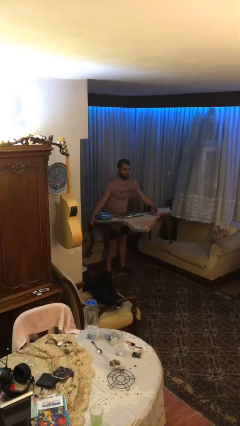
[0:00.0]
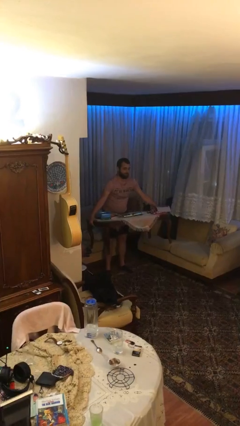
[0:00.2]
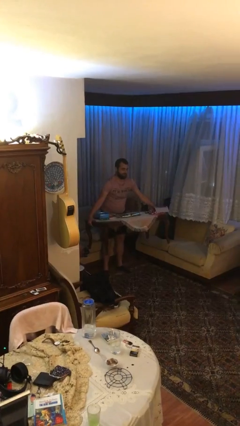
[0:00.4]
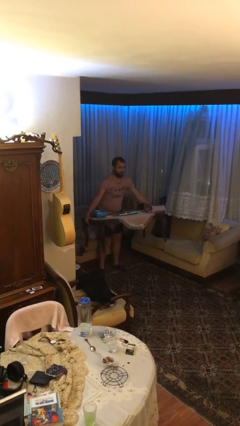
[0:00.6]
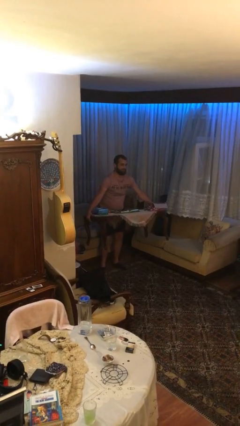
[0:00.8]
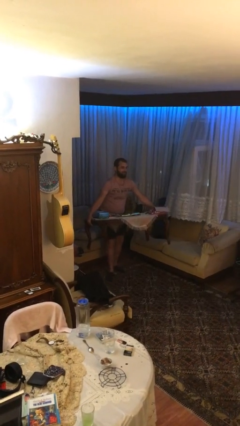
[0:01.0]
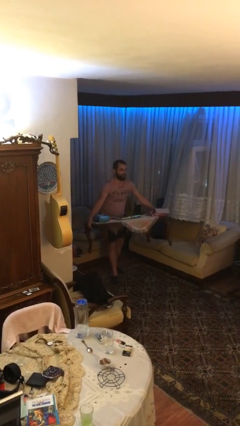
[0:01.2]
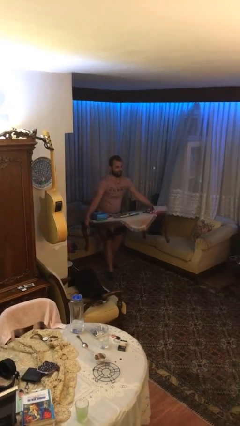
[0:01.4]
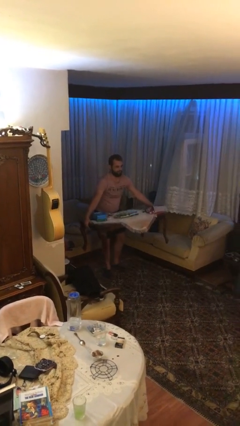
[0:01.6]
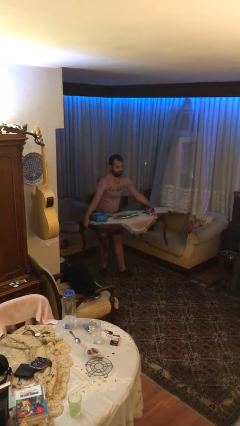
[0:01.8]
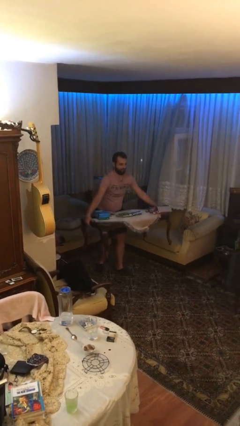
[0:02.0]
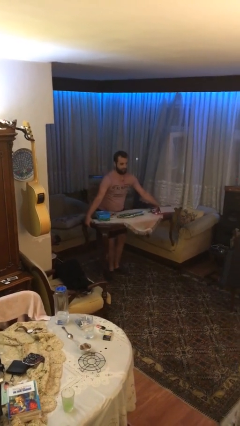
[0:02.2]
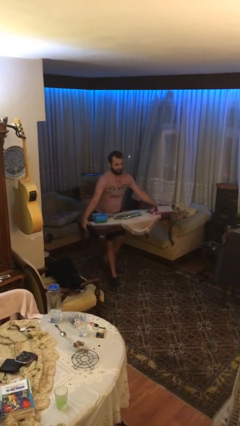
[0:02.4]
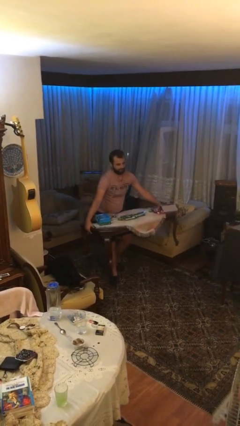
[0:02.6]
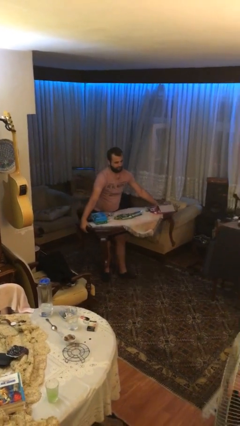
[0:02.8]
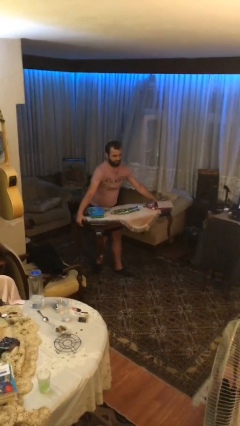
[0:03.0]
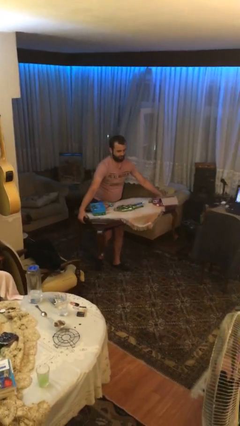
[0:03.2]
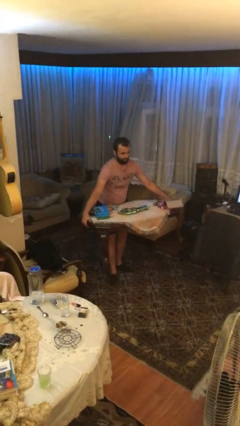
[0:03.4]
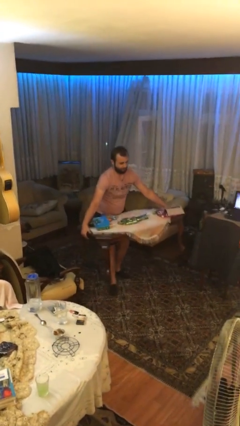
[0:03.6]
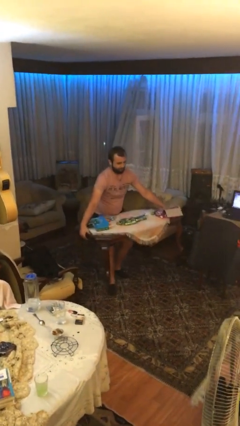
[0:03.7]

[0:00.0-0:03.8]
person carries heavy object

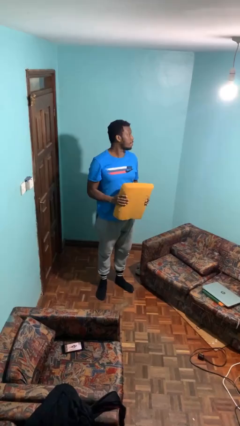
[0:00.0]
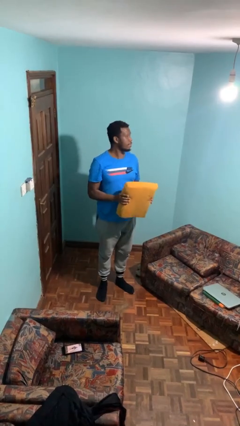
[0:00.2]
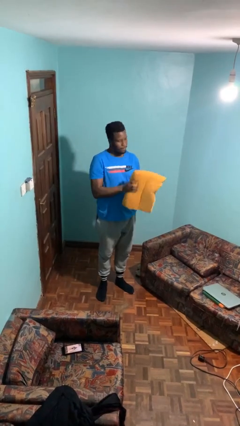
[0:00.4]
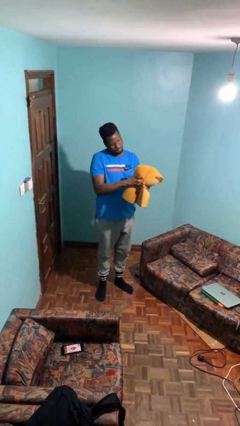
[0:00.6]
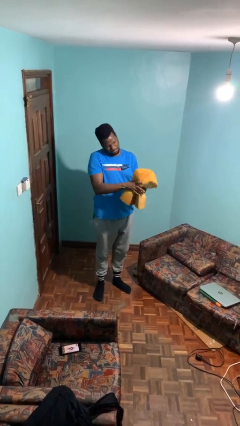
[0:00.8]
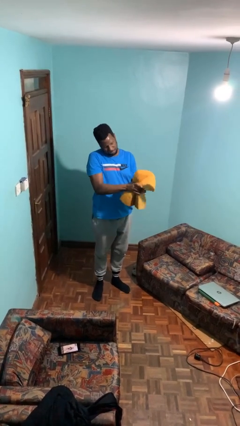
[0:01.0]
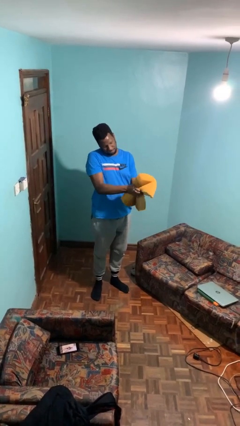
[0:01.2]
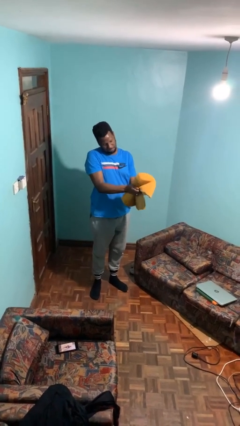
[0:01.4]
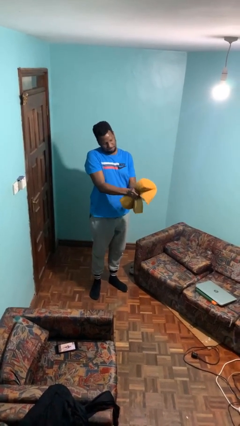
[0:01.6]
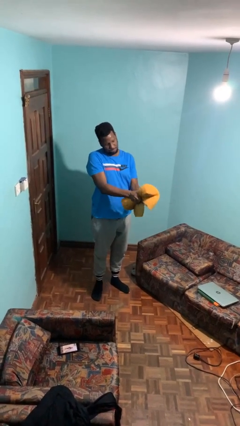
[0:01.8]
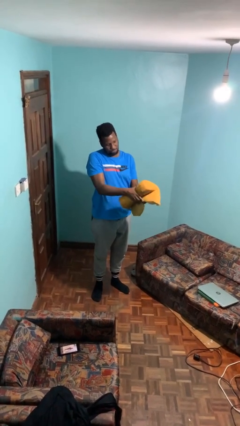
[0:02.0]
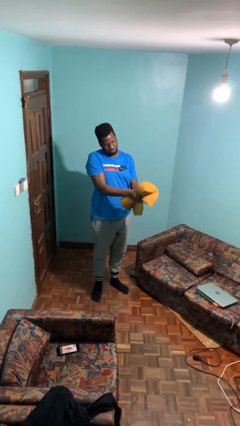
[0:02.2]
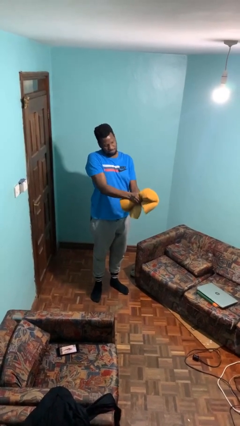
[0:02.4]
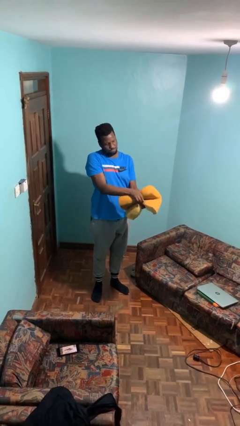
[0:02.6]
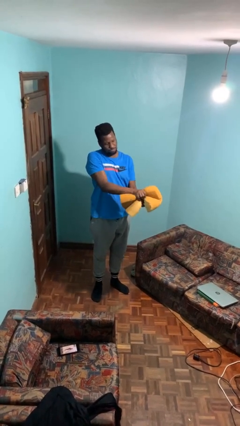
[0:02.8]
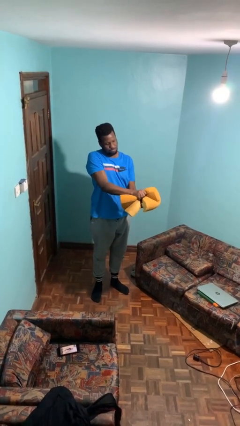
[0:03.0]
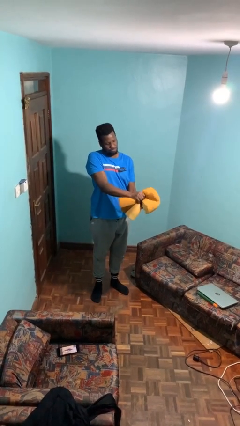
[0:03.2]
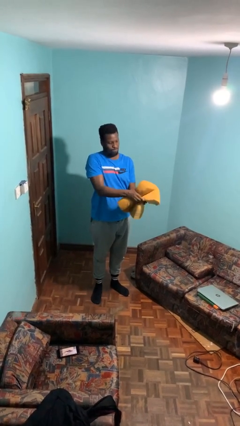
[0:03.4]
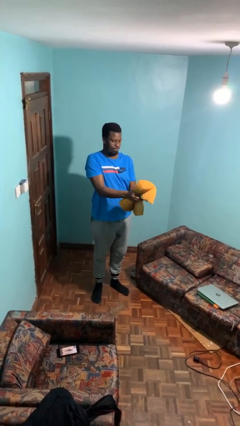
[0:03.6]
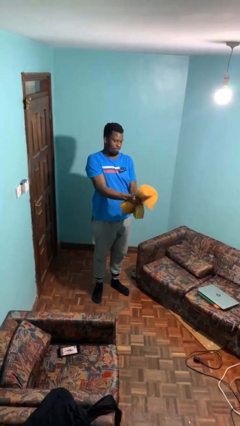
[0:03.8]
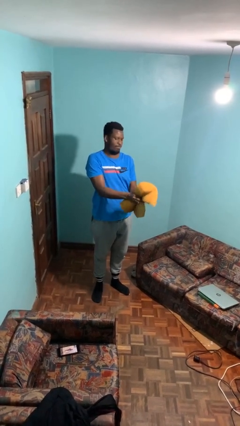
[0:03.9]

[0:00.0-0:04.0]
person squeezes object

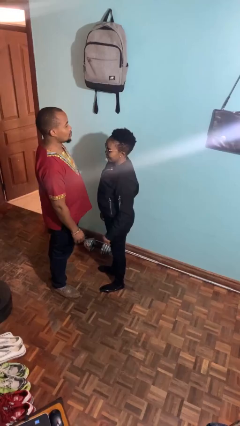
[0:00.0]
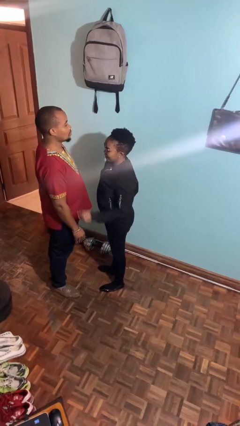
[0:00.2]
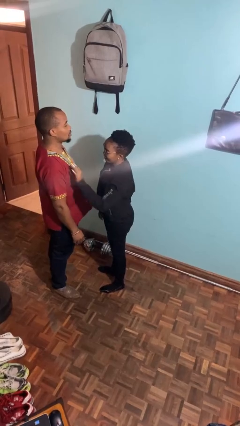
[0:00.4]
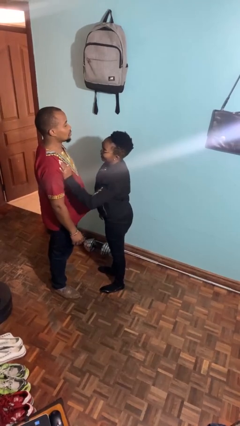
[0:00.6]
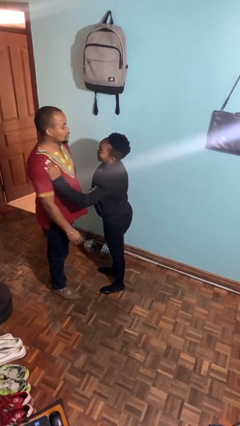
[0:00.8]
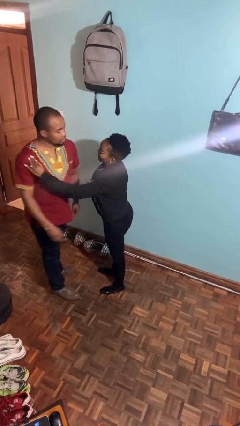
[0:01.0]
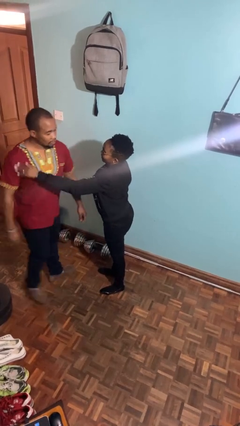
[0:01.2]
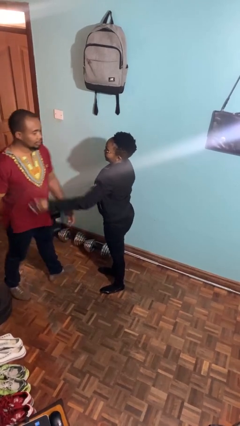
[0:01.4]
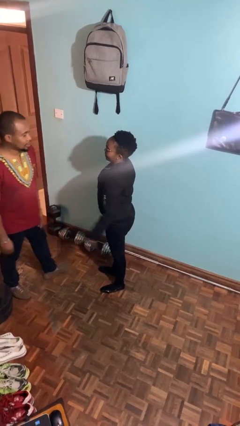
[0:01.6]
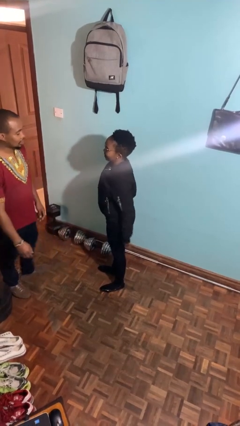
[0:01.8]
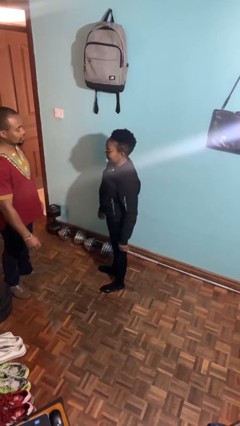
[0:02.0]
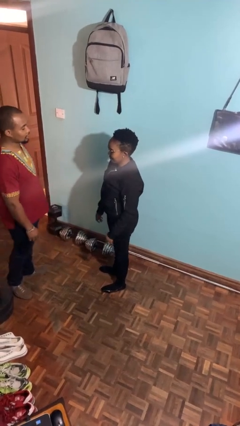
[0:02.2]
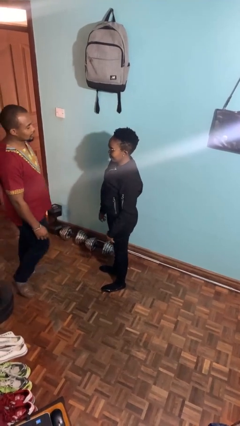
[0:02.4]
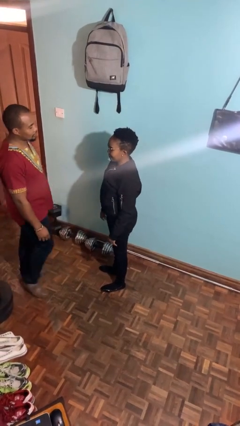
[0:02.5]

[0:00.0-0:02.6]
person shoves person

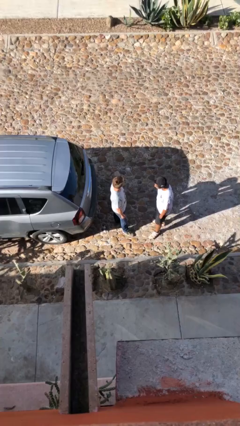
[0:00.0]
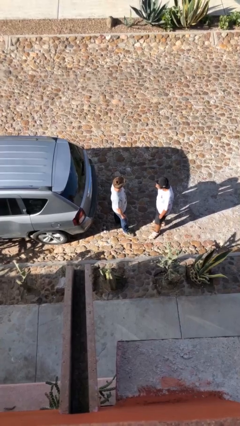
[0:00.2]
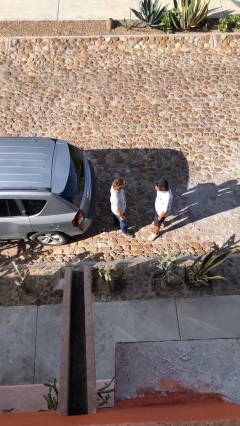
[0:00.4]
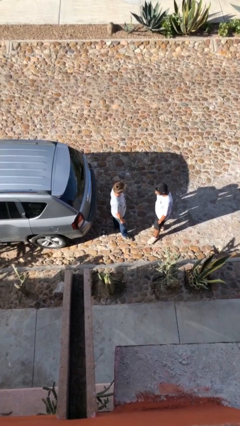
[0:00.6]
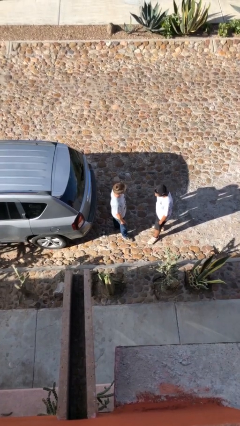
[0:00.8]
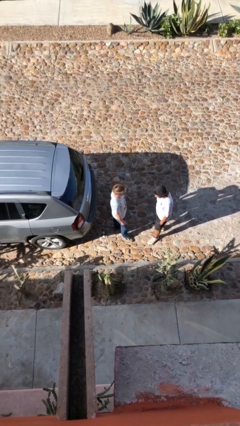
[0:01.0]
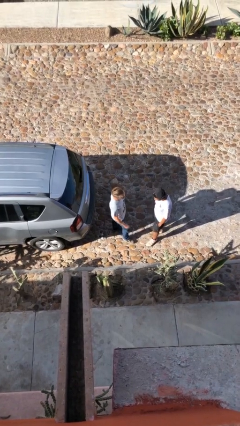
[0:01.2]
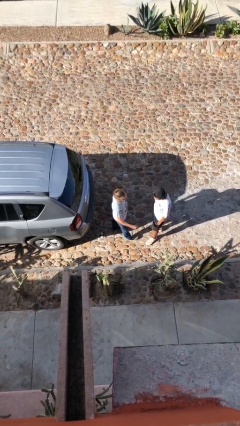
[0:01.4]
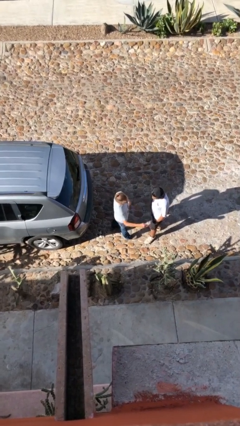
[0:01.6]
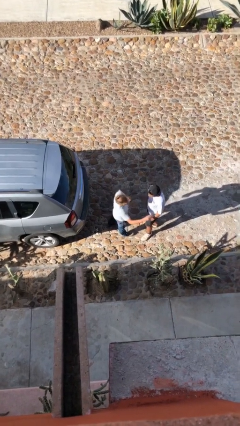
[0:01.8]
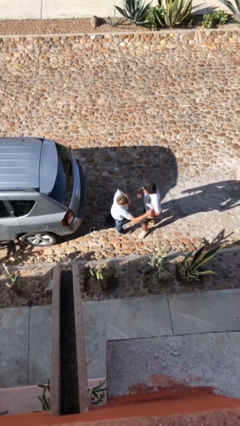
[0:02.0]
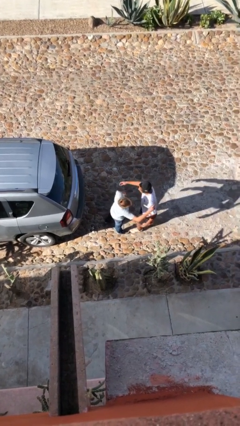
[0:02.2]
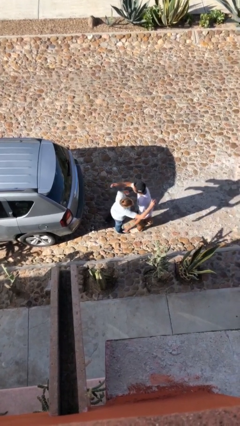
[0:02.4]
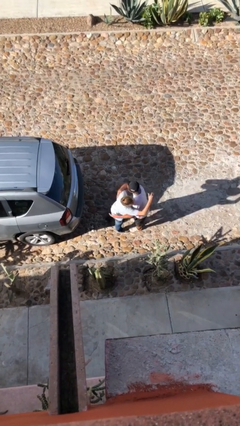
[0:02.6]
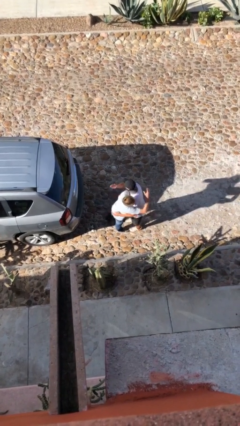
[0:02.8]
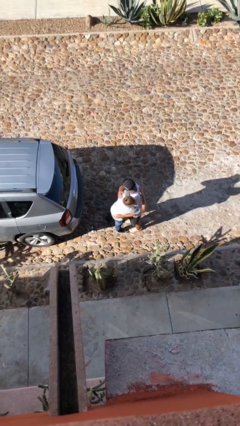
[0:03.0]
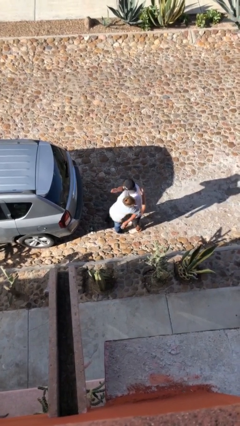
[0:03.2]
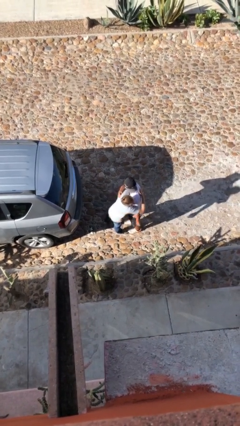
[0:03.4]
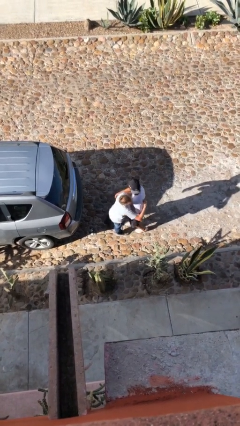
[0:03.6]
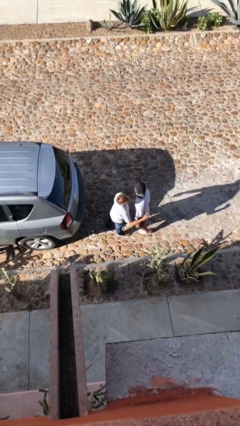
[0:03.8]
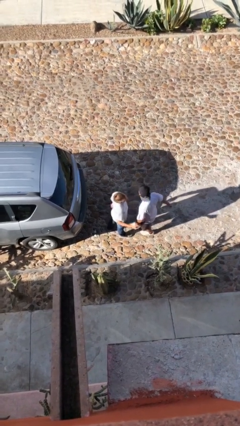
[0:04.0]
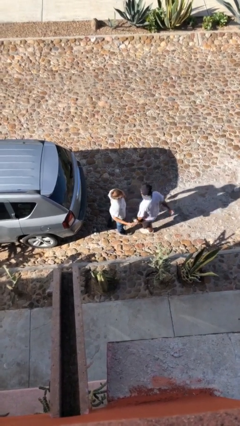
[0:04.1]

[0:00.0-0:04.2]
person embraces person

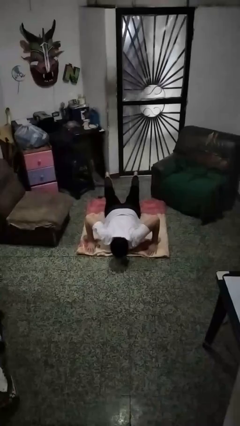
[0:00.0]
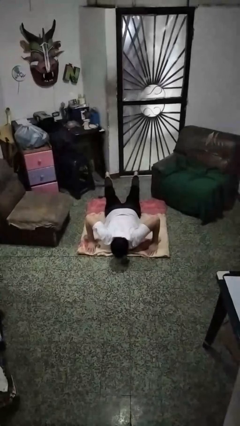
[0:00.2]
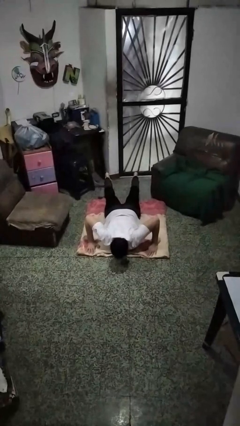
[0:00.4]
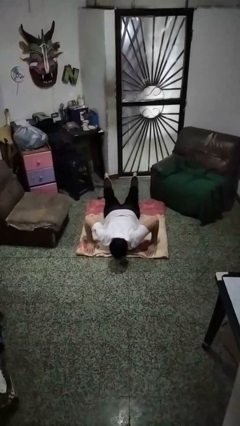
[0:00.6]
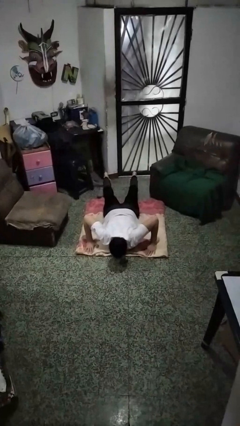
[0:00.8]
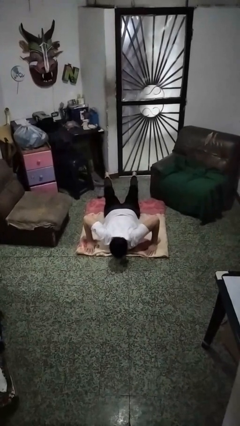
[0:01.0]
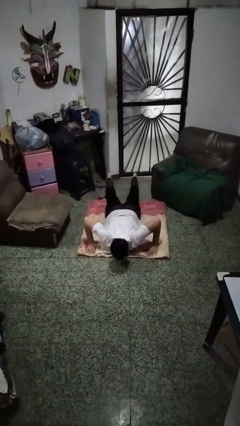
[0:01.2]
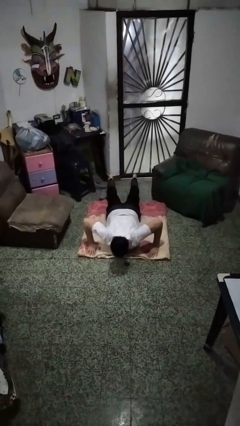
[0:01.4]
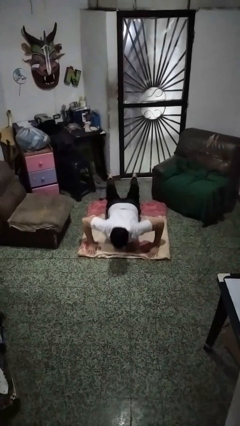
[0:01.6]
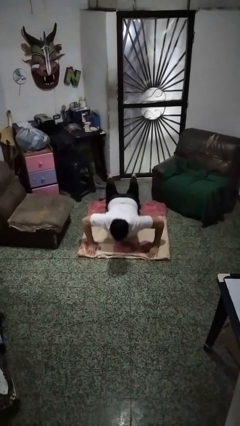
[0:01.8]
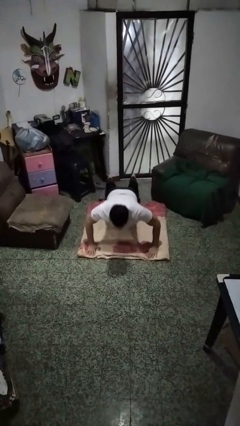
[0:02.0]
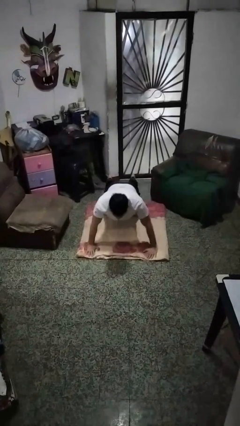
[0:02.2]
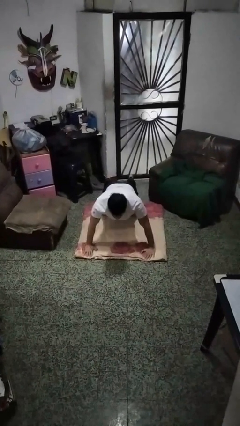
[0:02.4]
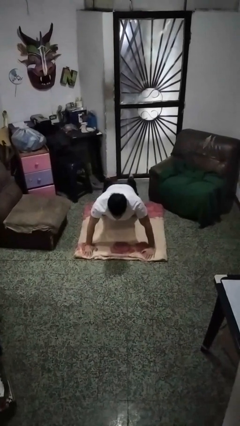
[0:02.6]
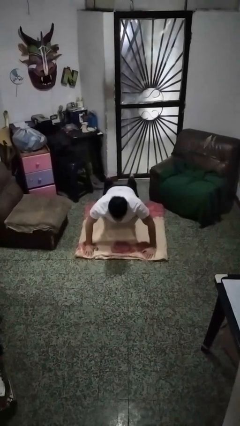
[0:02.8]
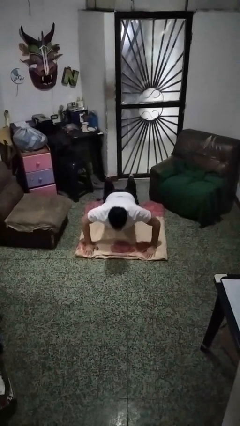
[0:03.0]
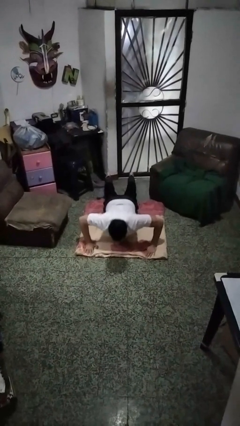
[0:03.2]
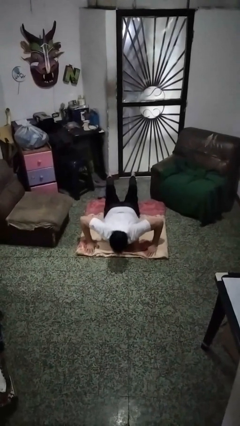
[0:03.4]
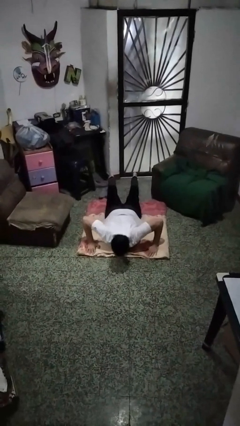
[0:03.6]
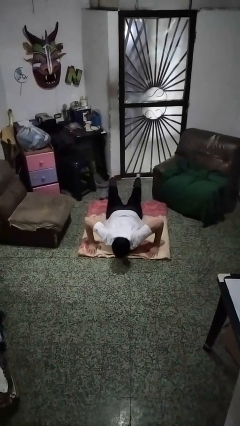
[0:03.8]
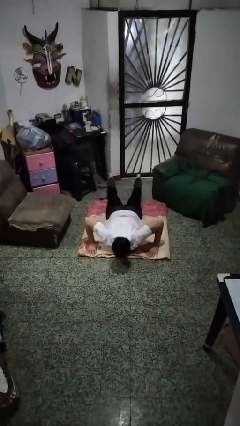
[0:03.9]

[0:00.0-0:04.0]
person exercises with pushup
